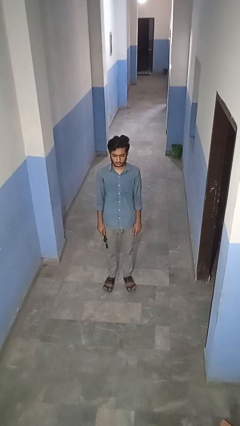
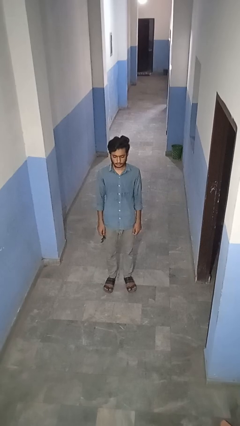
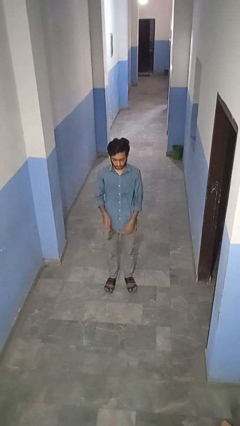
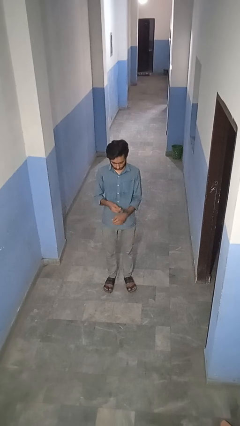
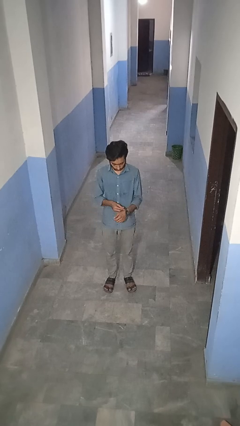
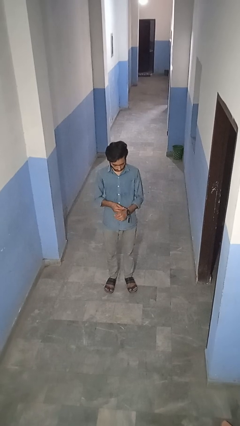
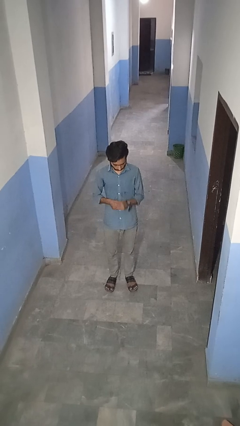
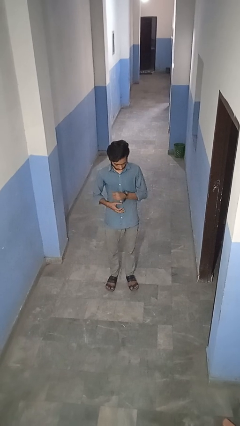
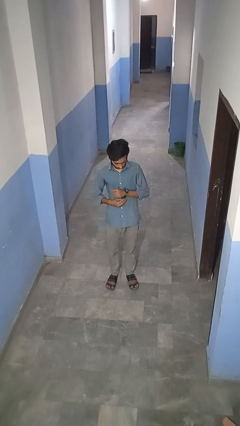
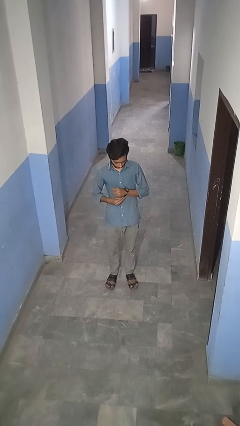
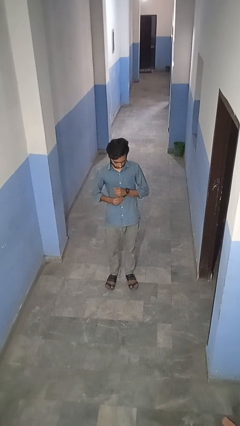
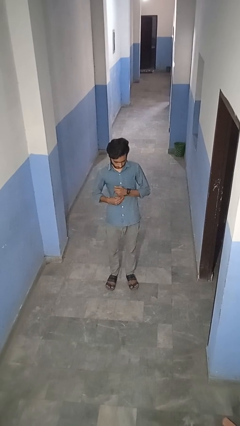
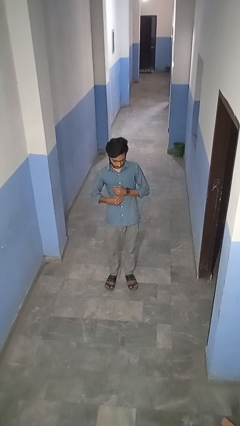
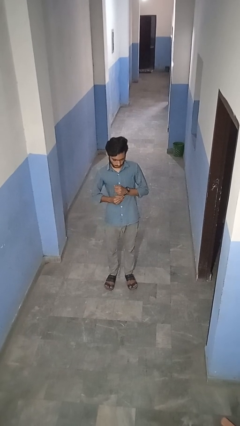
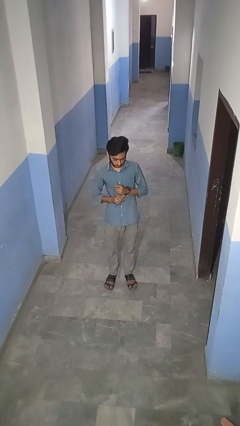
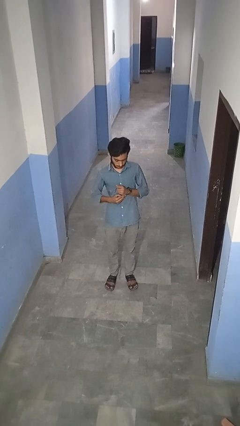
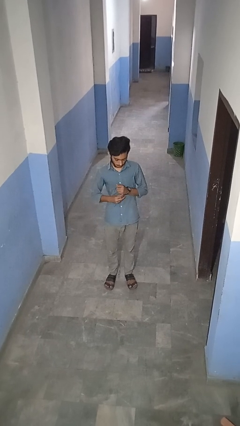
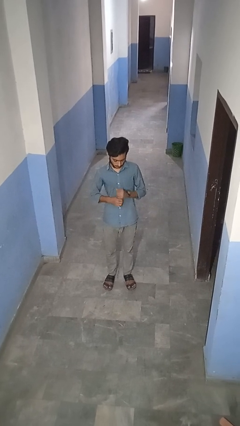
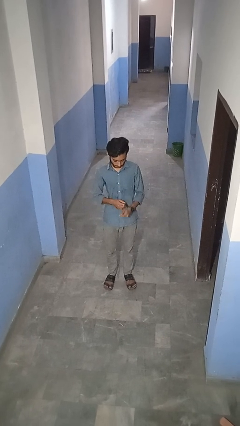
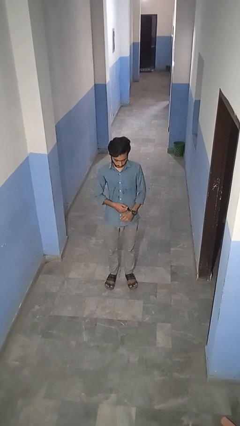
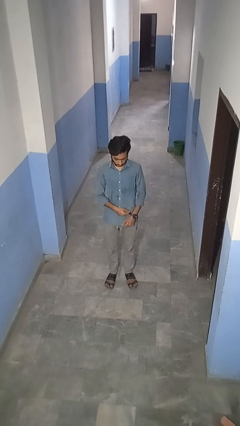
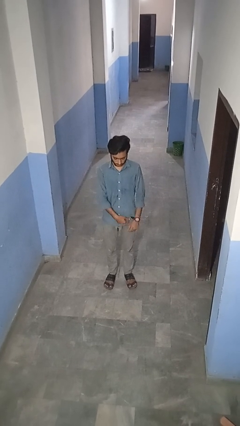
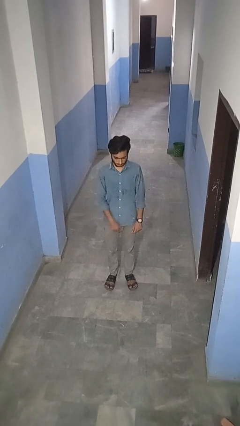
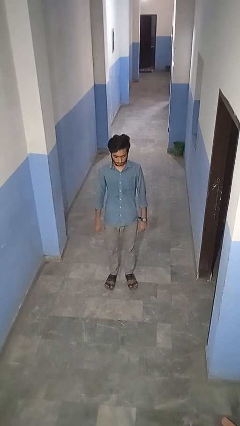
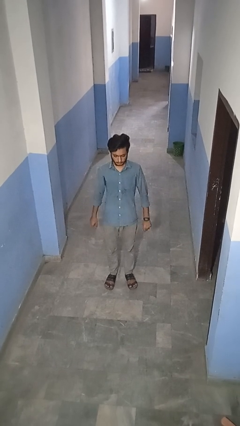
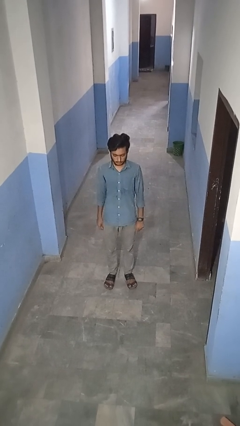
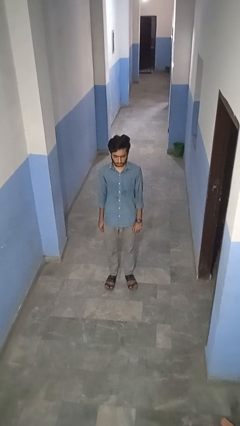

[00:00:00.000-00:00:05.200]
person puts on wristwatch

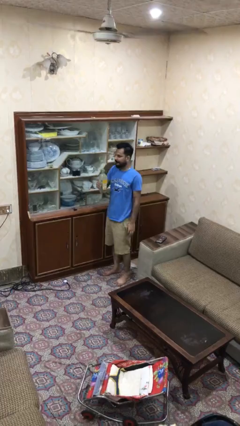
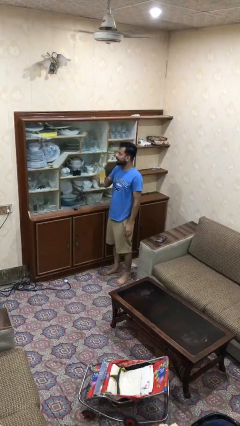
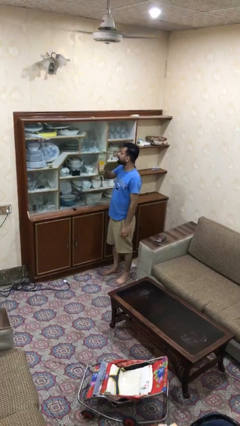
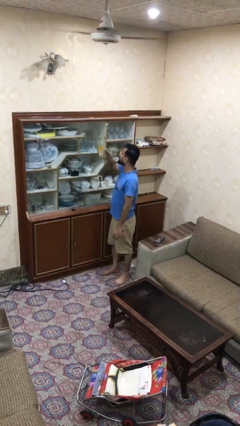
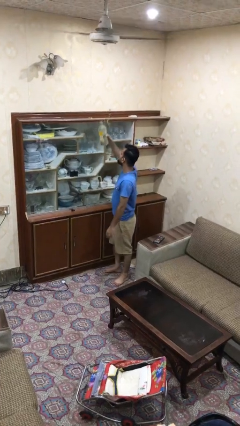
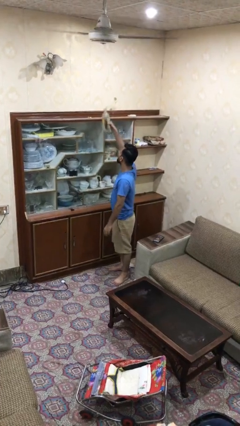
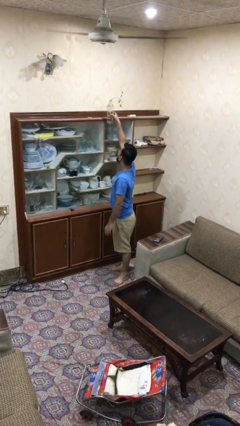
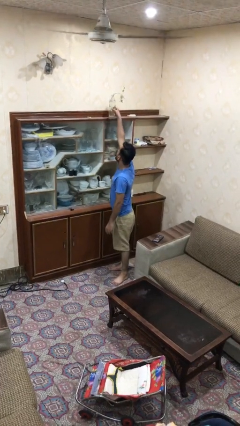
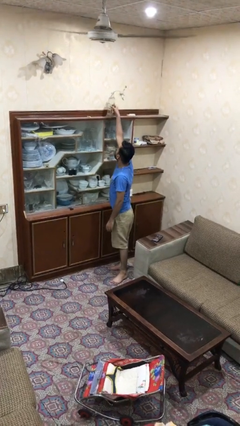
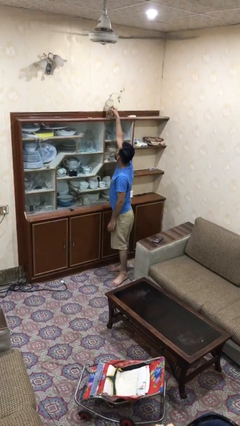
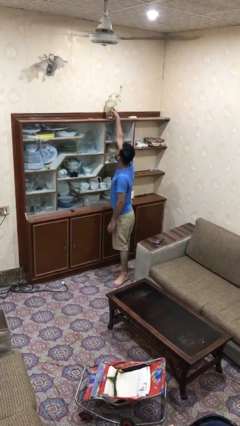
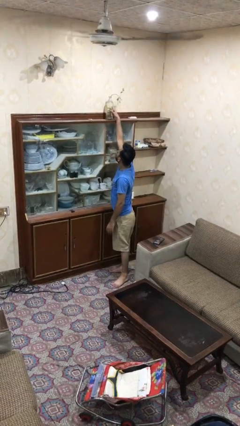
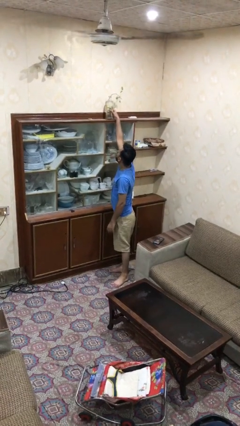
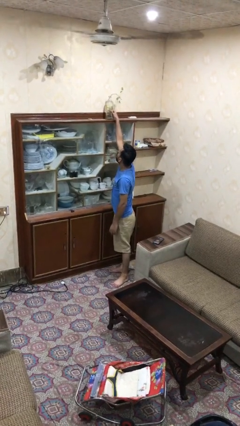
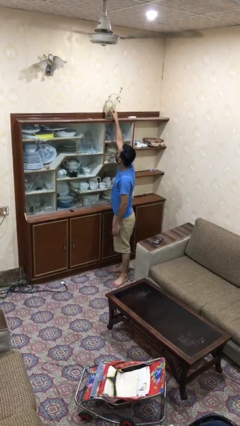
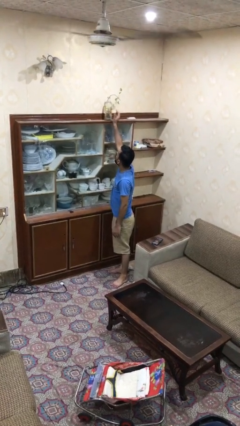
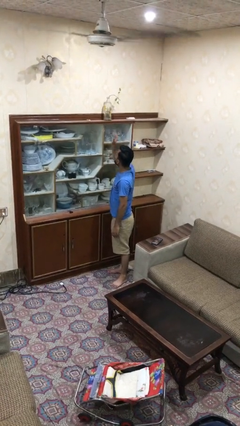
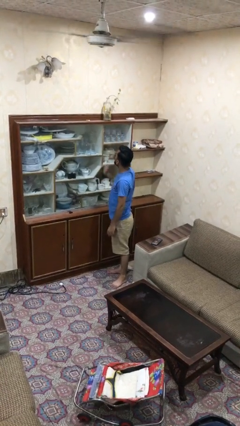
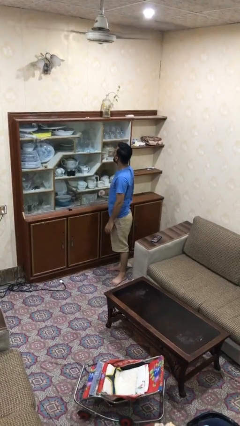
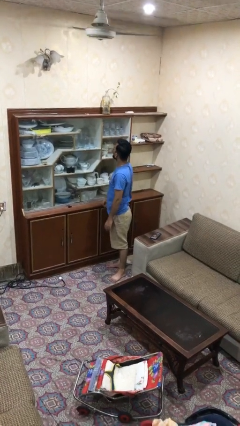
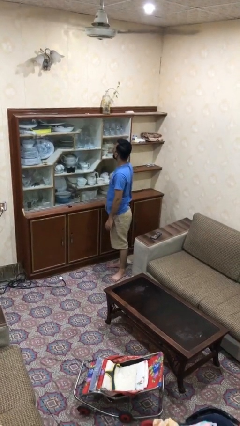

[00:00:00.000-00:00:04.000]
person puts down object on shelf

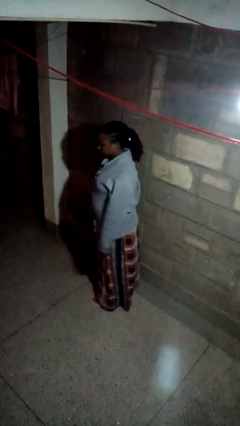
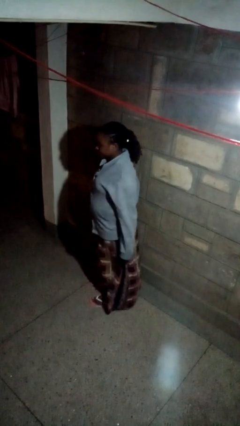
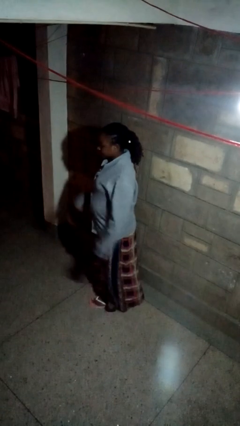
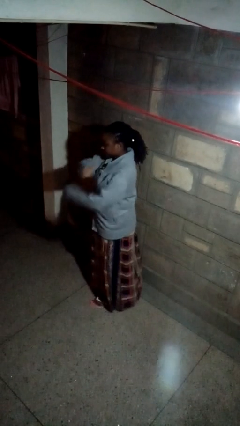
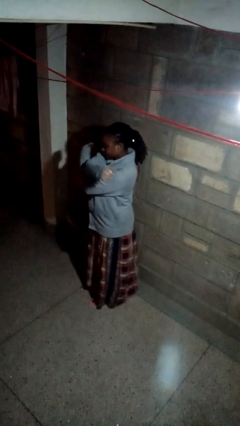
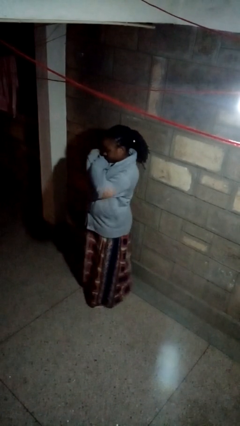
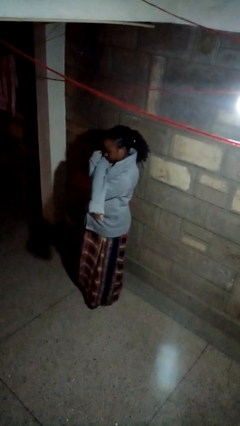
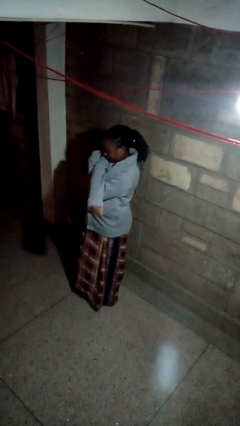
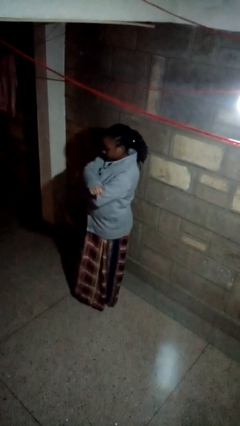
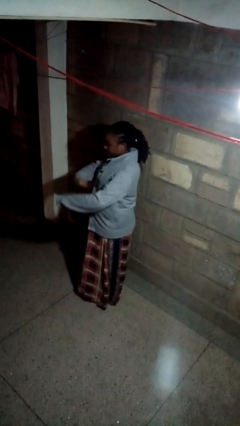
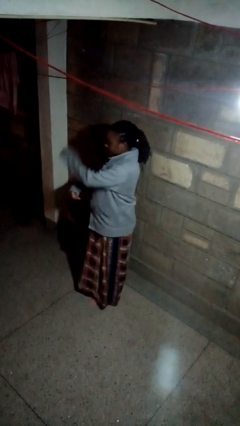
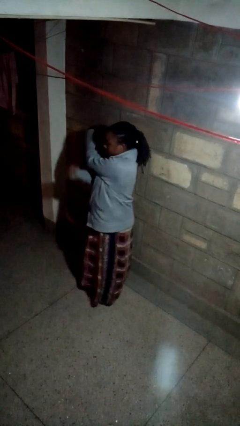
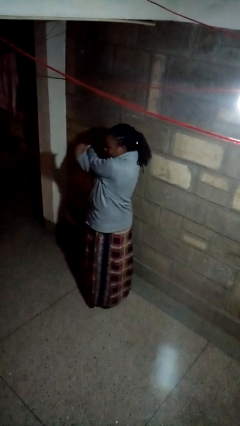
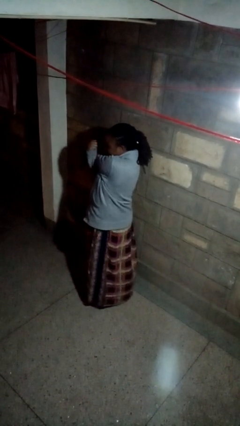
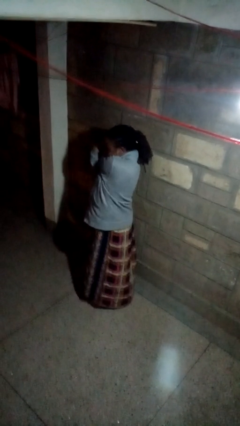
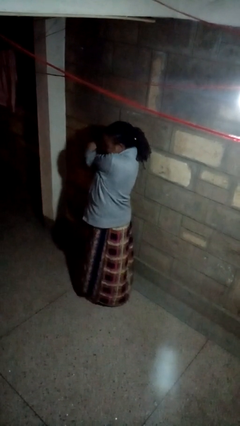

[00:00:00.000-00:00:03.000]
person stretches arms to side

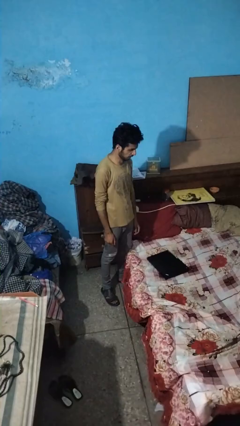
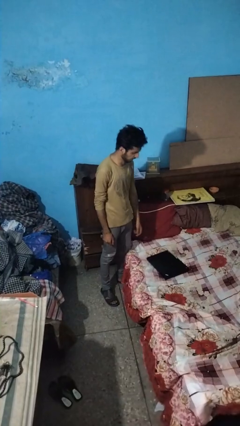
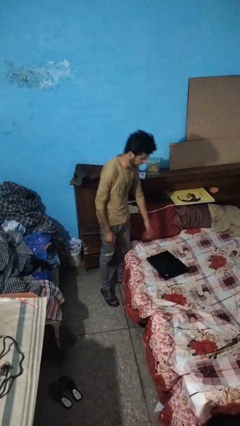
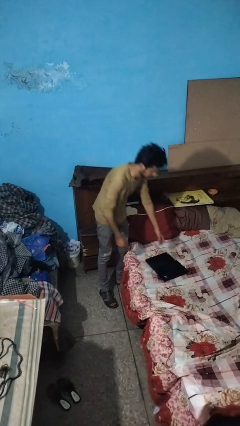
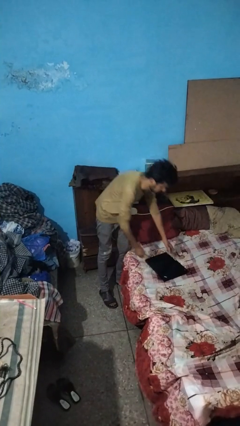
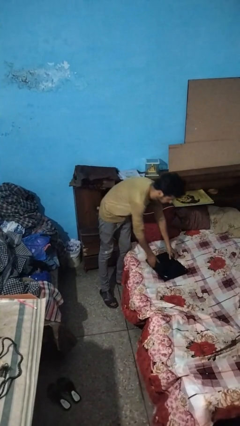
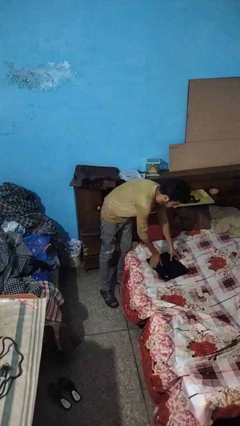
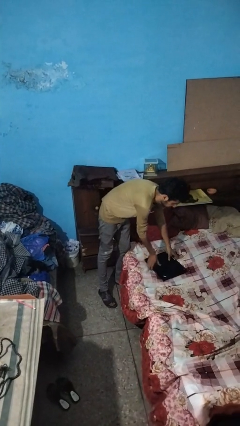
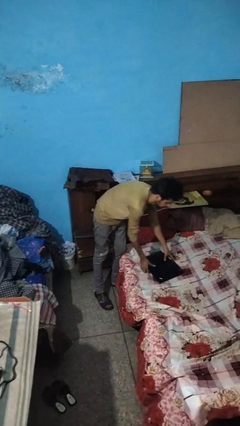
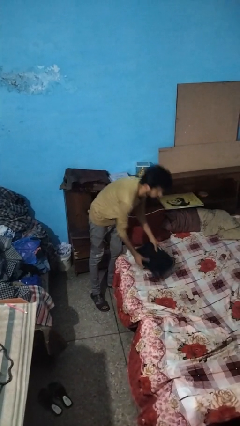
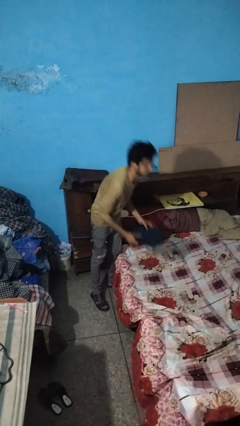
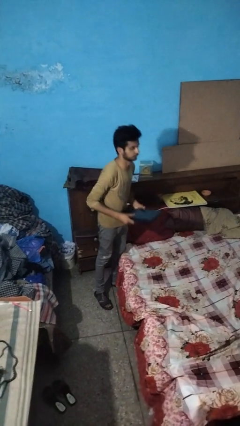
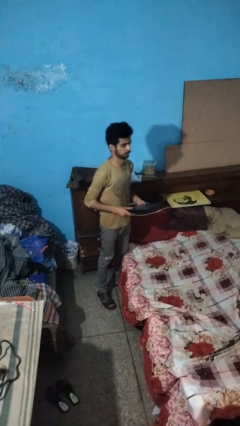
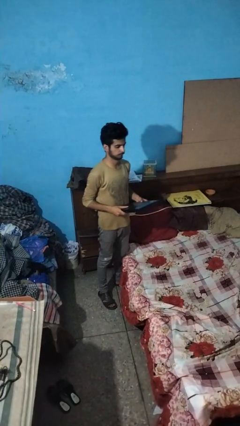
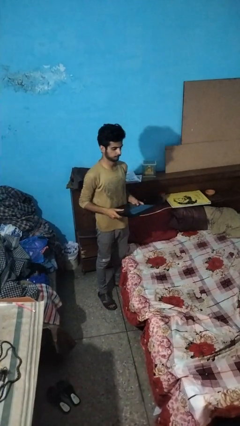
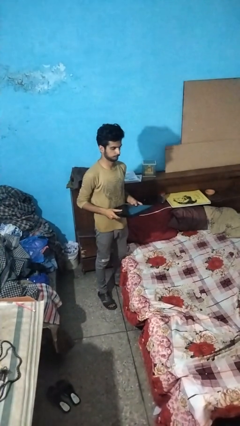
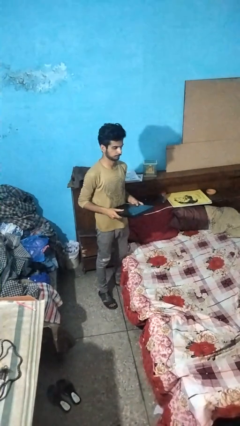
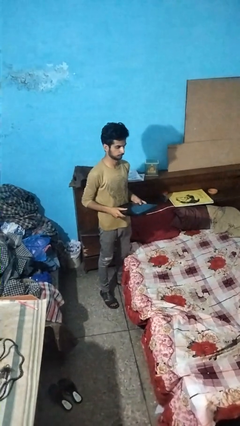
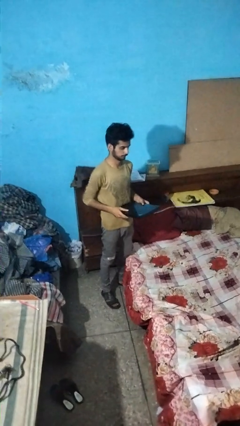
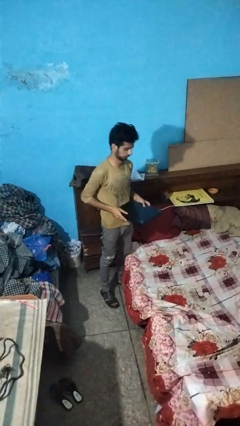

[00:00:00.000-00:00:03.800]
person picks up object from bed

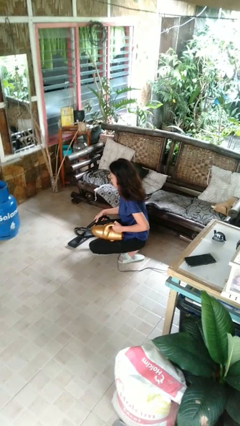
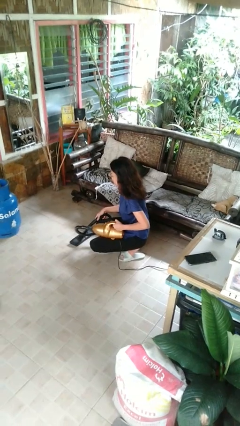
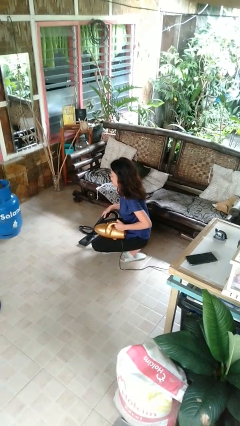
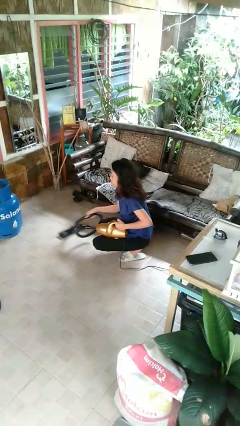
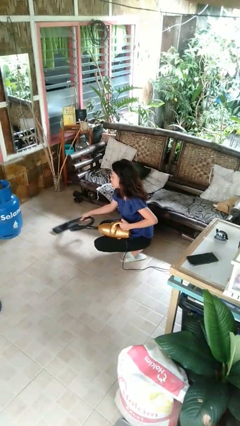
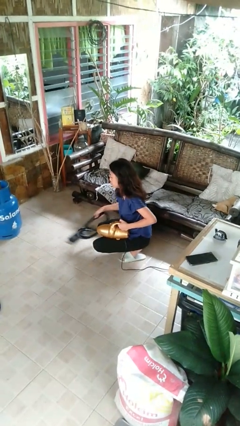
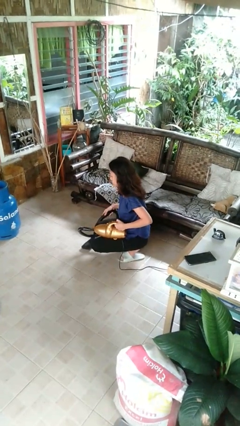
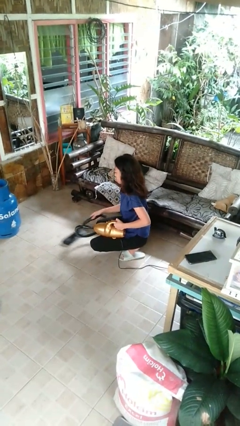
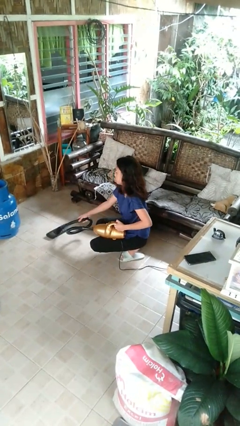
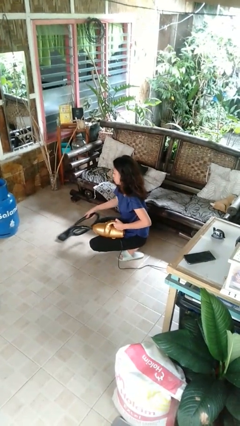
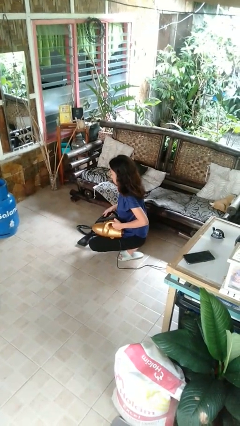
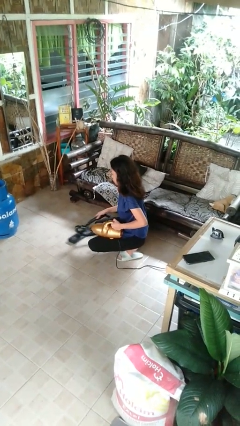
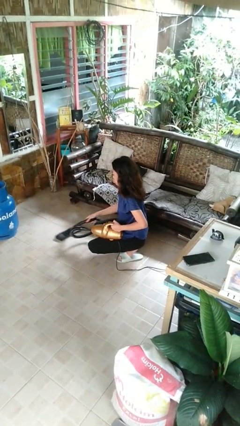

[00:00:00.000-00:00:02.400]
person vacuums carpet
